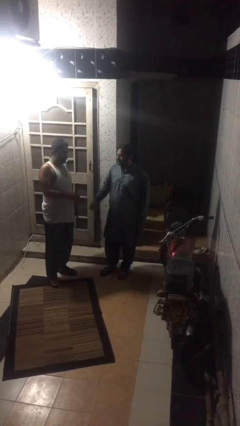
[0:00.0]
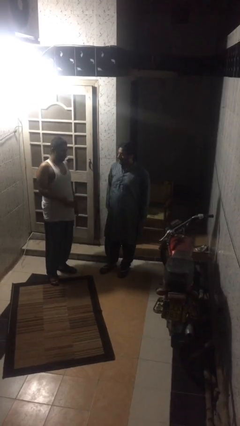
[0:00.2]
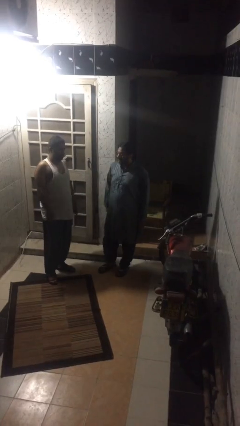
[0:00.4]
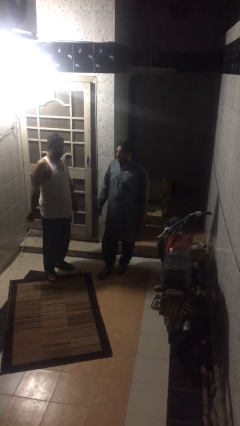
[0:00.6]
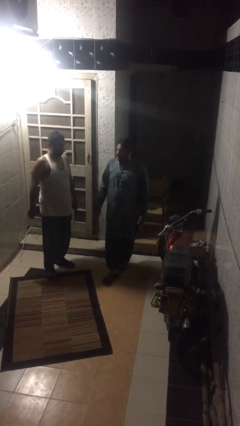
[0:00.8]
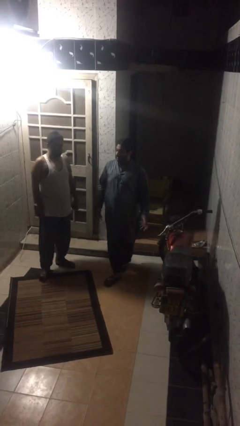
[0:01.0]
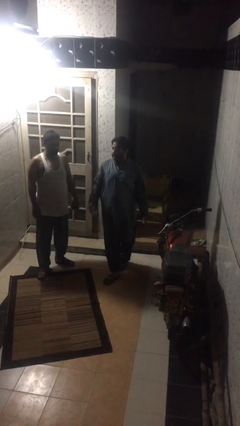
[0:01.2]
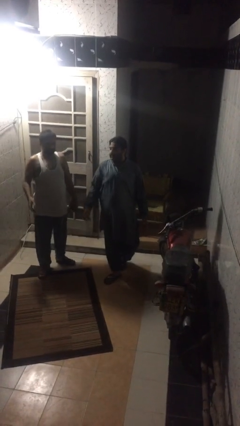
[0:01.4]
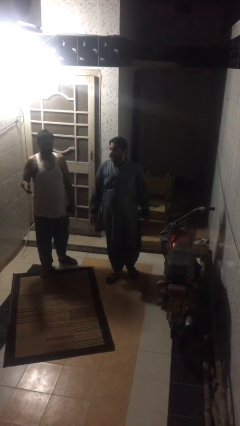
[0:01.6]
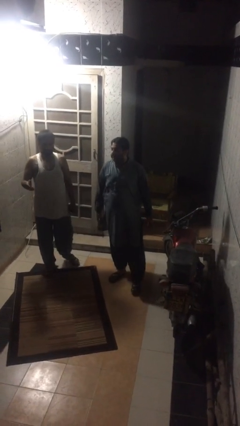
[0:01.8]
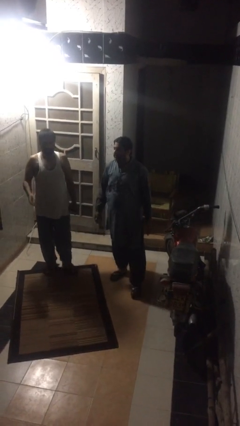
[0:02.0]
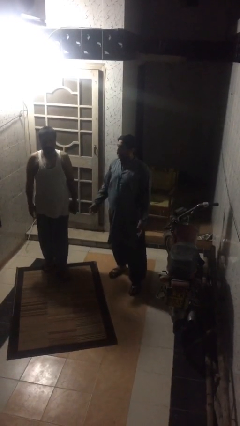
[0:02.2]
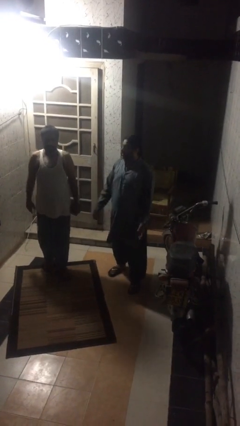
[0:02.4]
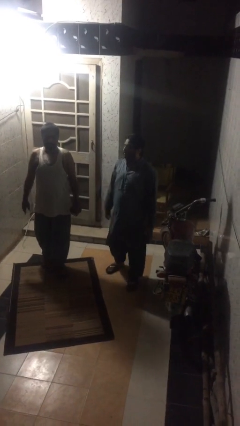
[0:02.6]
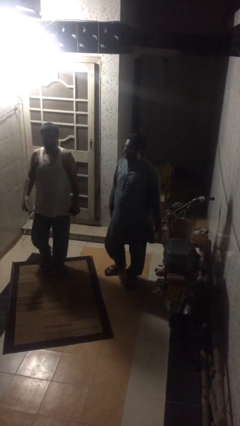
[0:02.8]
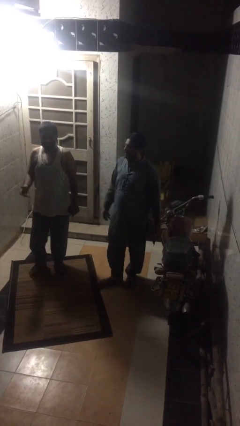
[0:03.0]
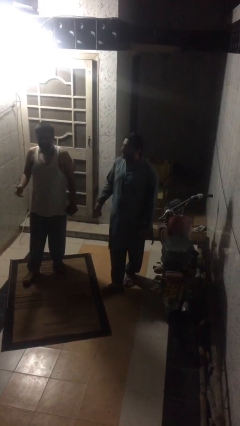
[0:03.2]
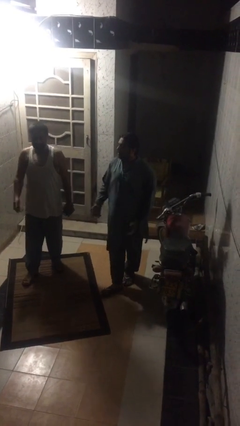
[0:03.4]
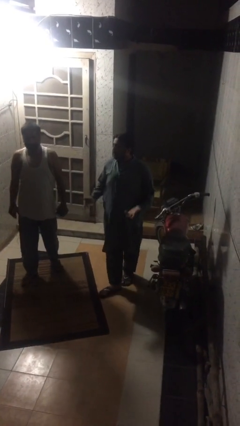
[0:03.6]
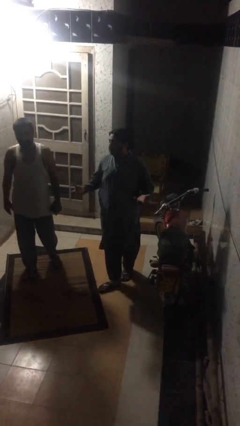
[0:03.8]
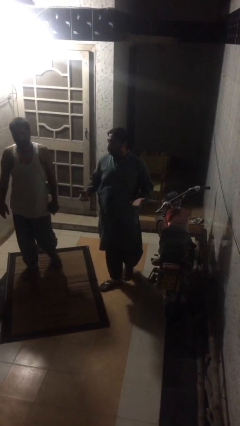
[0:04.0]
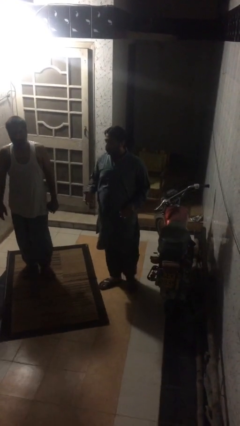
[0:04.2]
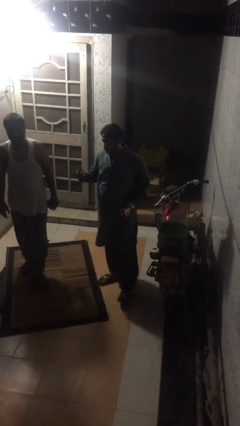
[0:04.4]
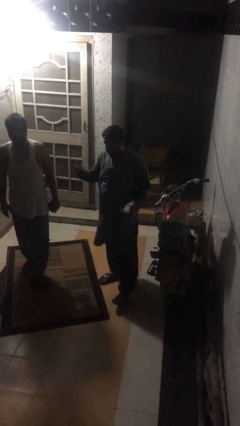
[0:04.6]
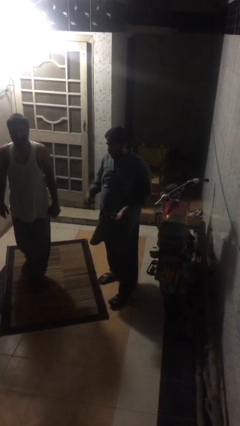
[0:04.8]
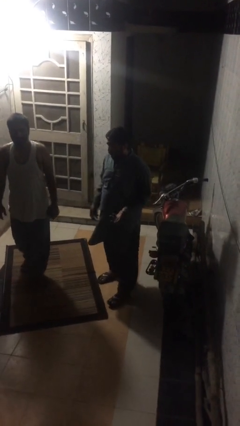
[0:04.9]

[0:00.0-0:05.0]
person talks to person

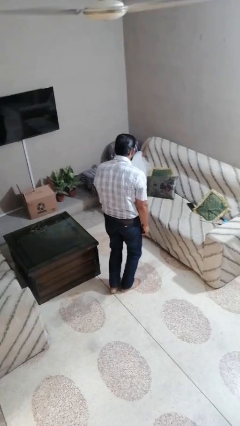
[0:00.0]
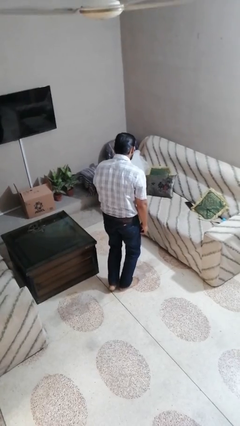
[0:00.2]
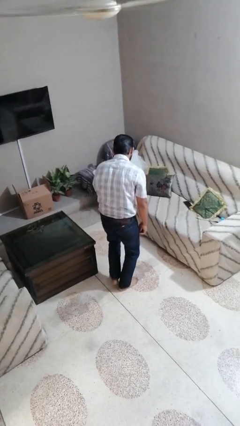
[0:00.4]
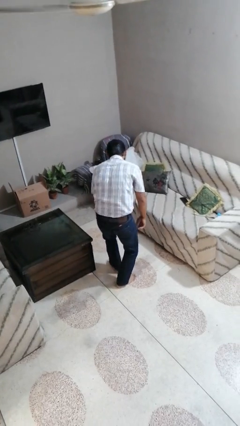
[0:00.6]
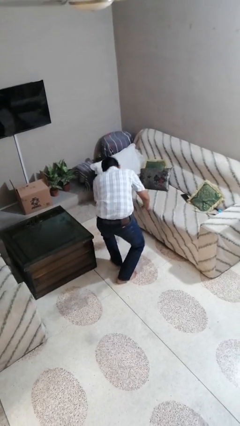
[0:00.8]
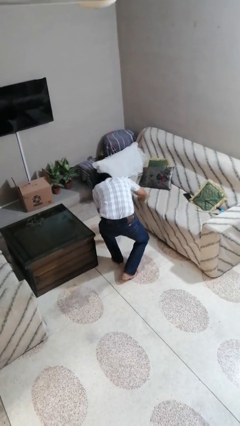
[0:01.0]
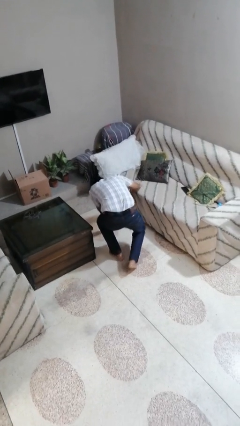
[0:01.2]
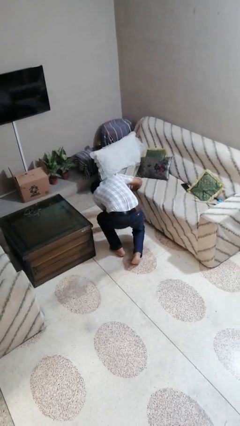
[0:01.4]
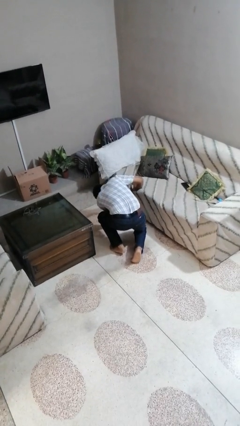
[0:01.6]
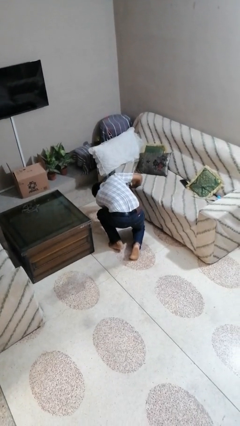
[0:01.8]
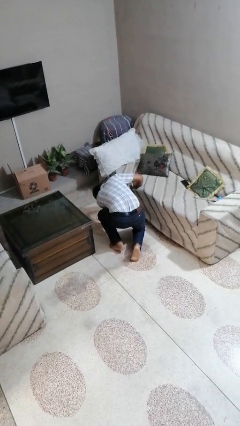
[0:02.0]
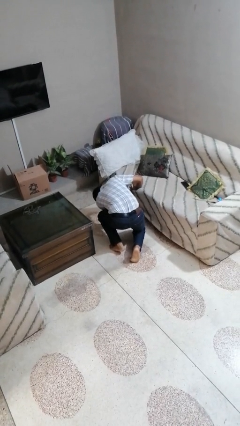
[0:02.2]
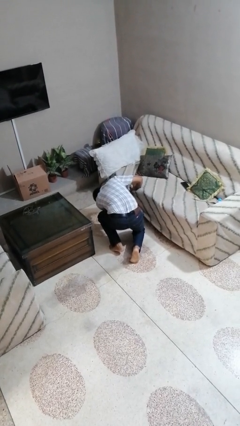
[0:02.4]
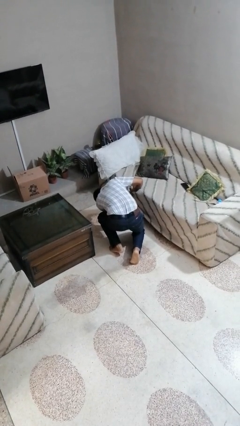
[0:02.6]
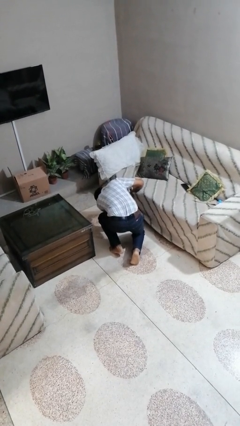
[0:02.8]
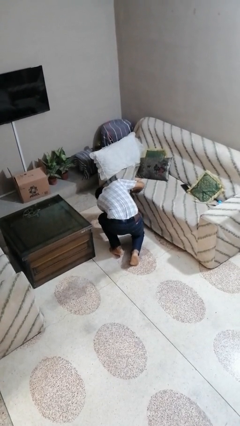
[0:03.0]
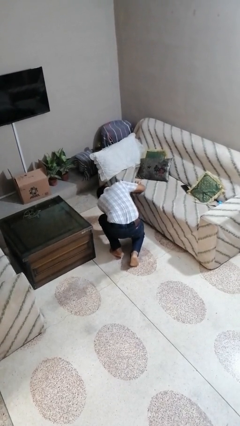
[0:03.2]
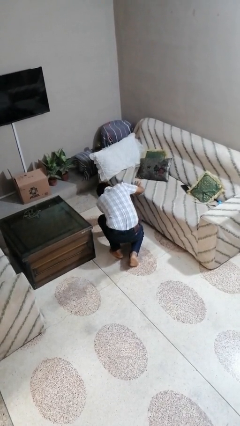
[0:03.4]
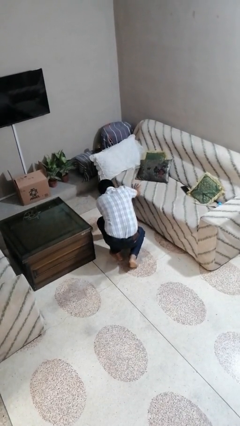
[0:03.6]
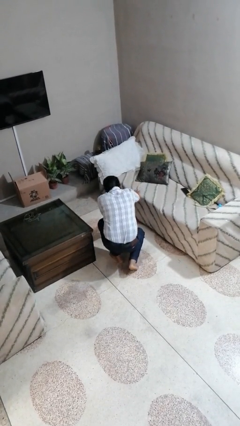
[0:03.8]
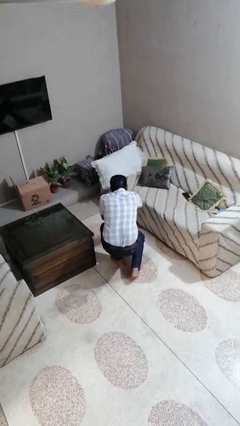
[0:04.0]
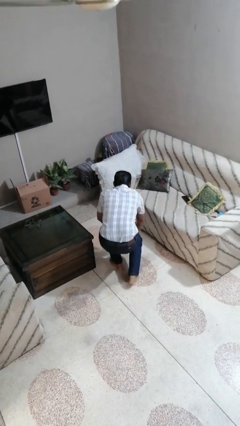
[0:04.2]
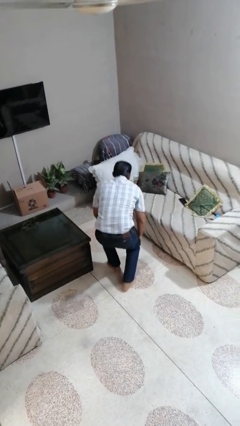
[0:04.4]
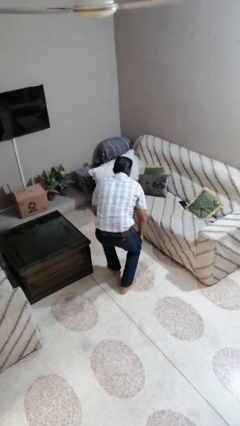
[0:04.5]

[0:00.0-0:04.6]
person searches under couch

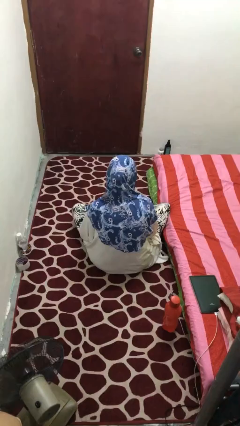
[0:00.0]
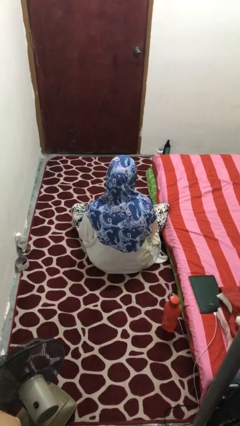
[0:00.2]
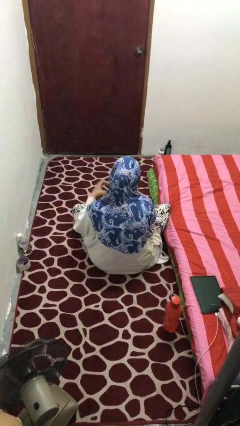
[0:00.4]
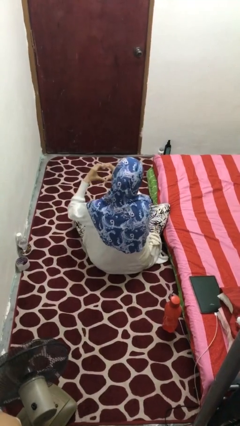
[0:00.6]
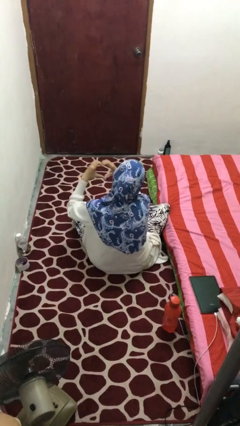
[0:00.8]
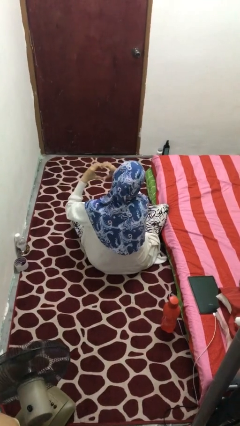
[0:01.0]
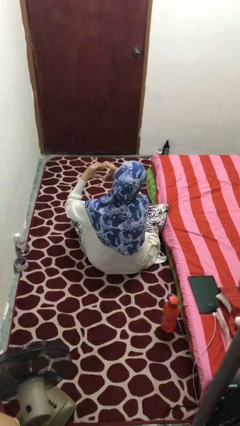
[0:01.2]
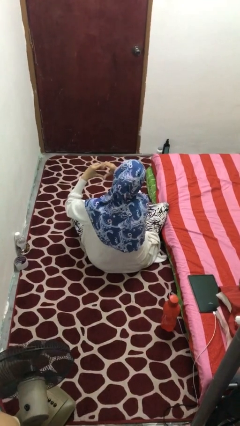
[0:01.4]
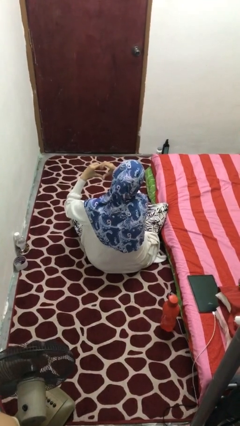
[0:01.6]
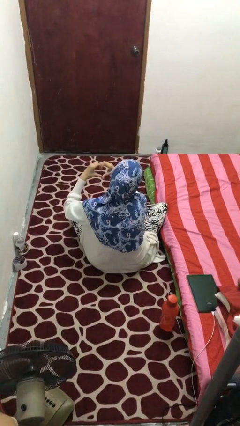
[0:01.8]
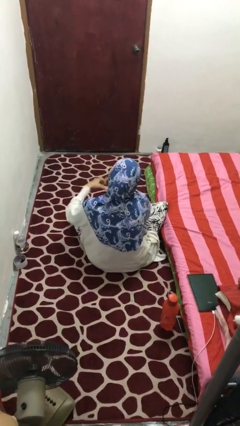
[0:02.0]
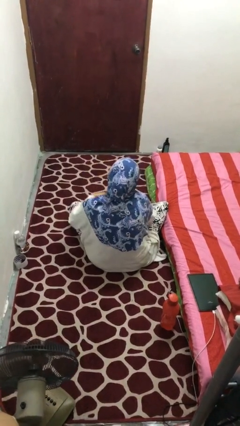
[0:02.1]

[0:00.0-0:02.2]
person gestures heart

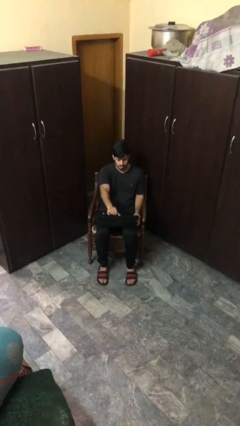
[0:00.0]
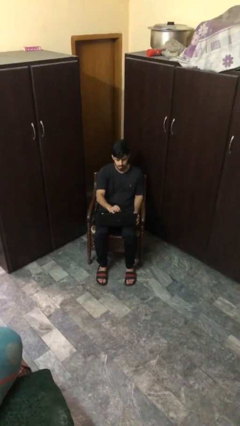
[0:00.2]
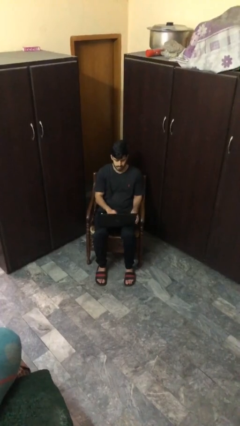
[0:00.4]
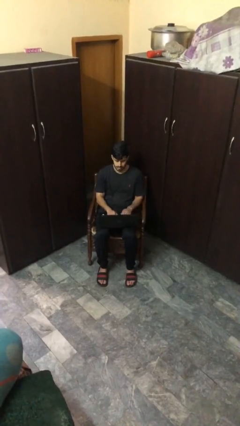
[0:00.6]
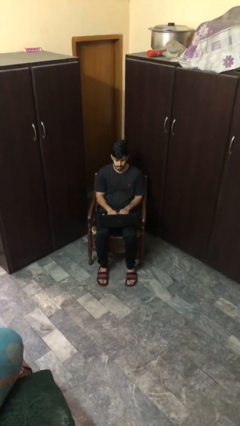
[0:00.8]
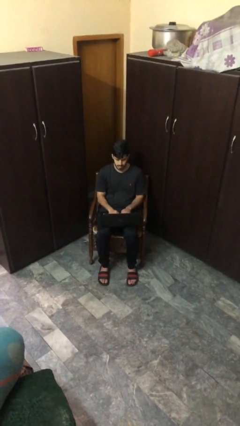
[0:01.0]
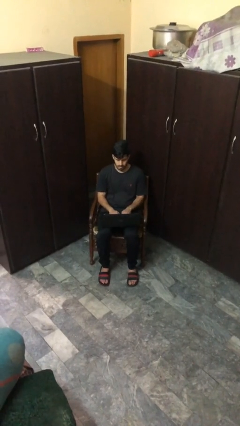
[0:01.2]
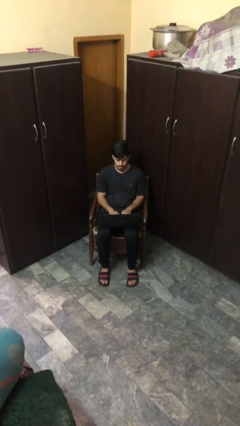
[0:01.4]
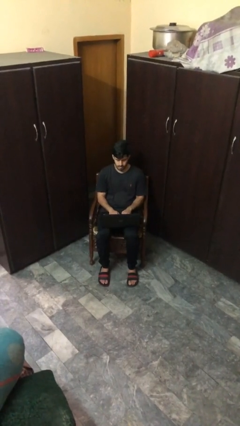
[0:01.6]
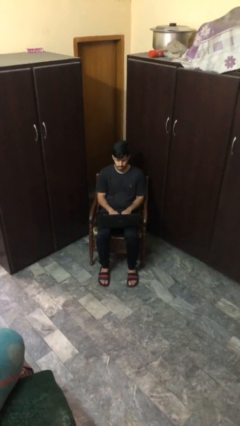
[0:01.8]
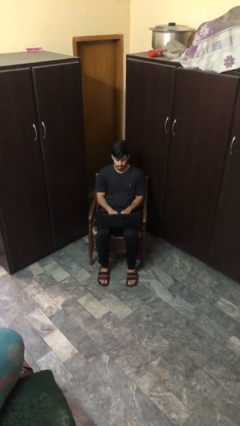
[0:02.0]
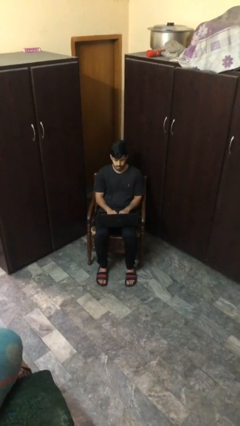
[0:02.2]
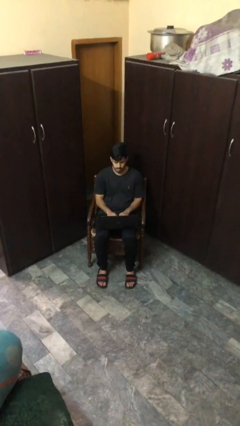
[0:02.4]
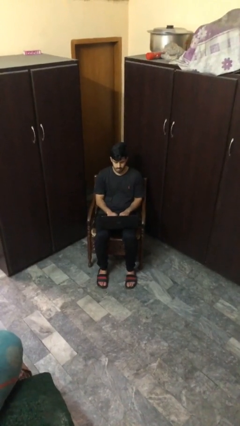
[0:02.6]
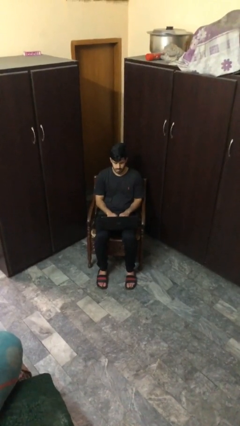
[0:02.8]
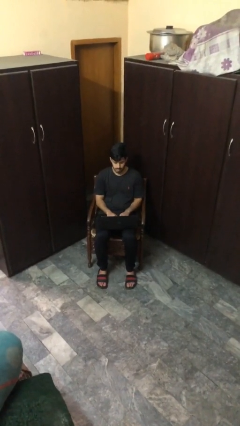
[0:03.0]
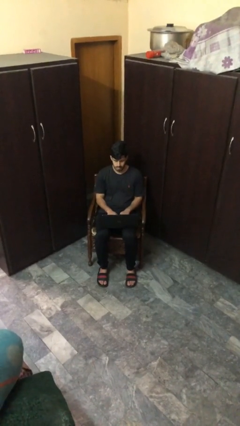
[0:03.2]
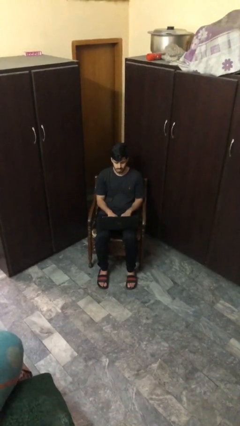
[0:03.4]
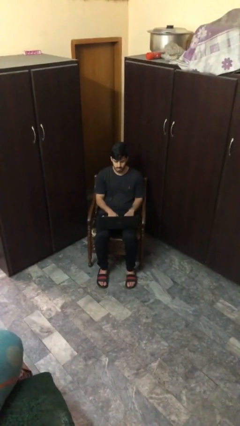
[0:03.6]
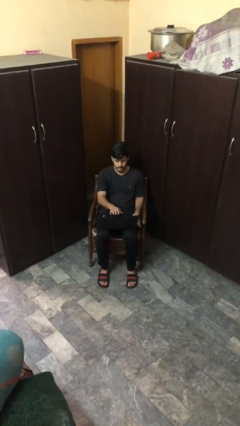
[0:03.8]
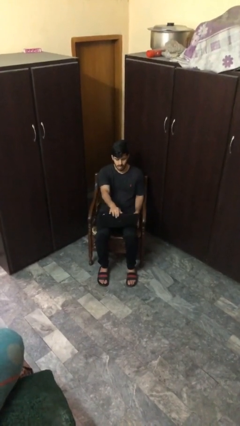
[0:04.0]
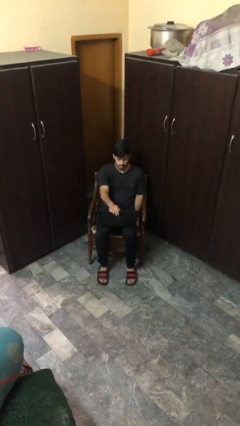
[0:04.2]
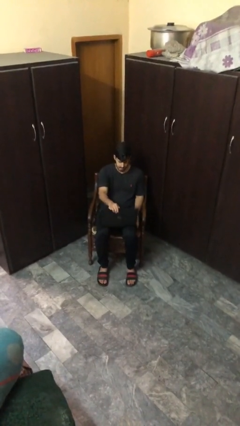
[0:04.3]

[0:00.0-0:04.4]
person interacts with laptop

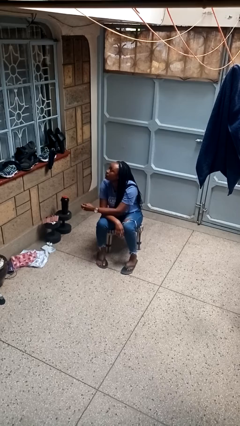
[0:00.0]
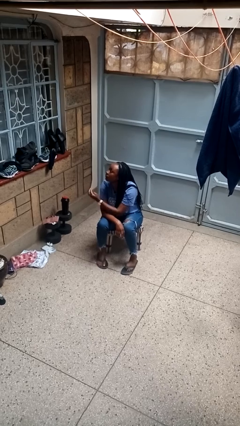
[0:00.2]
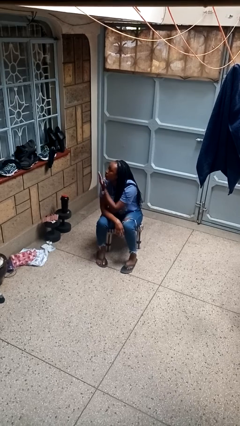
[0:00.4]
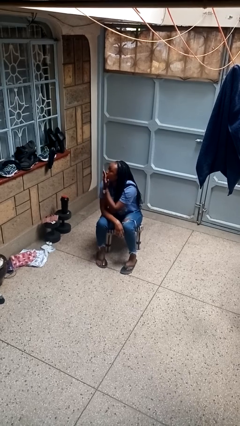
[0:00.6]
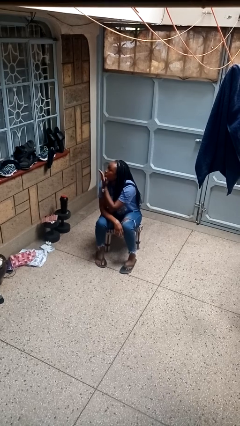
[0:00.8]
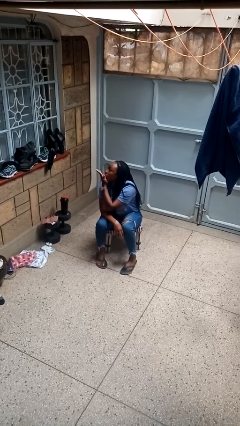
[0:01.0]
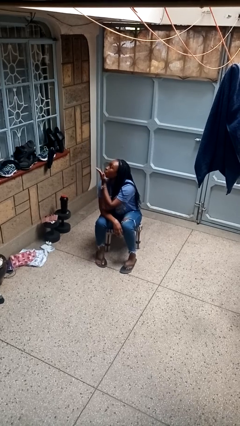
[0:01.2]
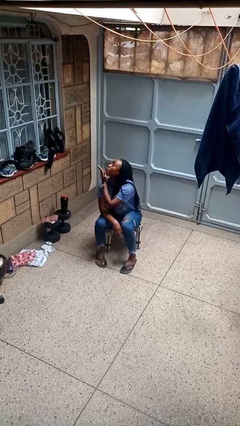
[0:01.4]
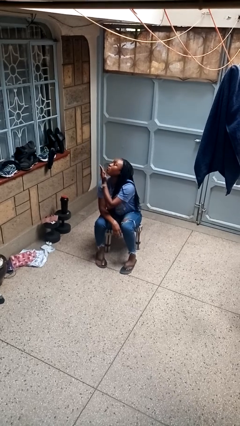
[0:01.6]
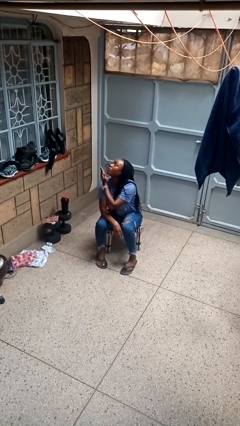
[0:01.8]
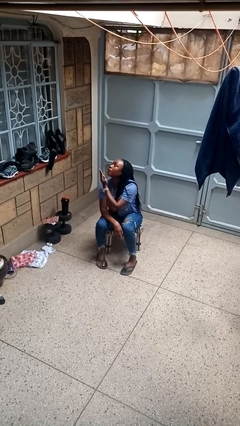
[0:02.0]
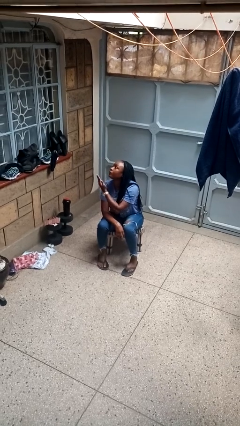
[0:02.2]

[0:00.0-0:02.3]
person gestures blow kiss
